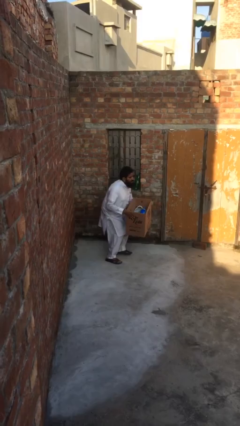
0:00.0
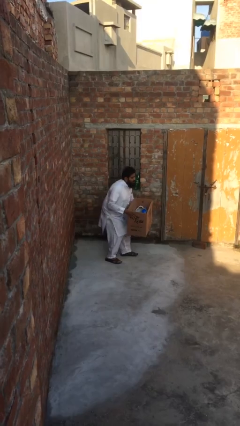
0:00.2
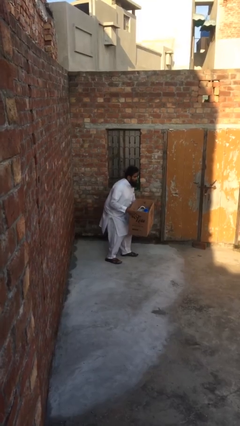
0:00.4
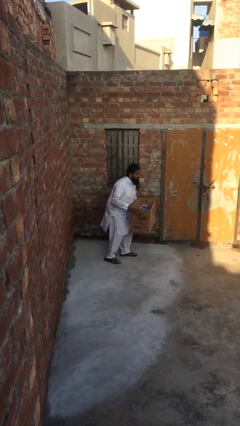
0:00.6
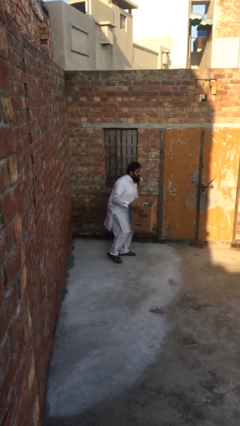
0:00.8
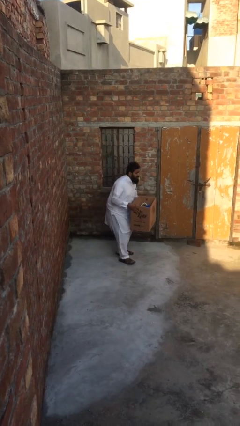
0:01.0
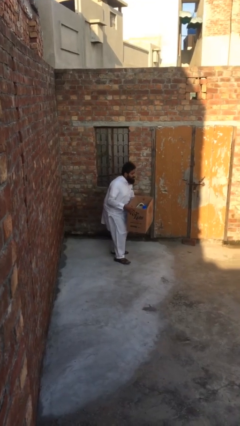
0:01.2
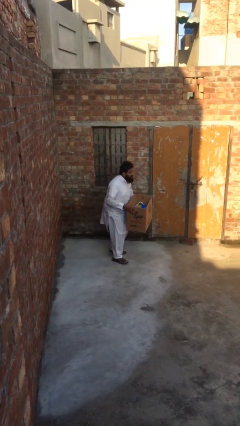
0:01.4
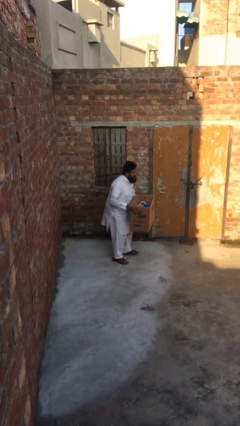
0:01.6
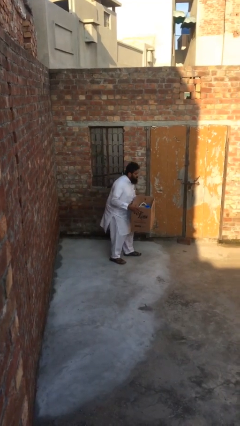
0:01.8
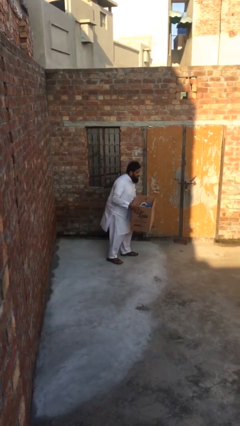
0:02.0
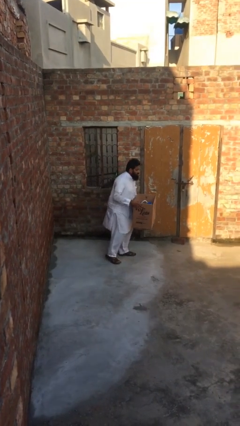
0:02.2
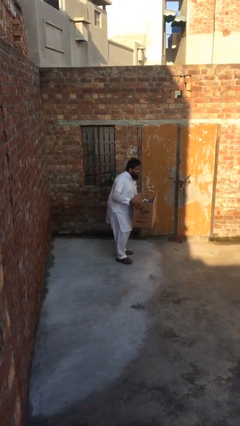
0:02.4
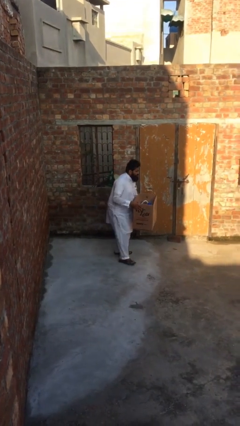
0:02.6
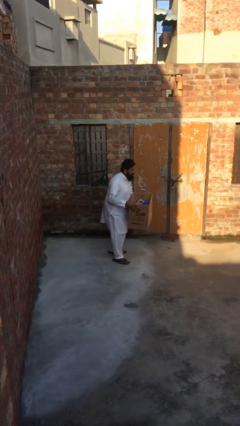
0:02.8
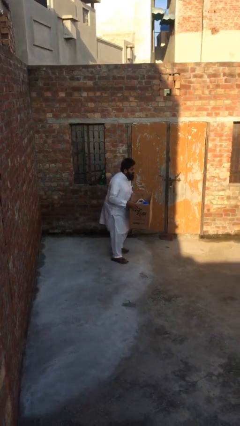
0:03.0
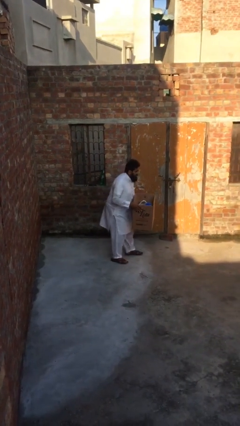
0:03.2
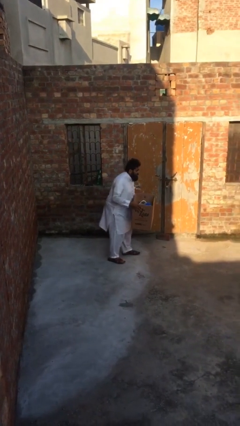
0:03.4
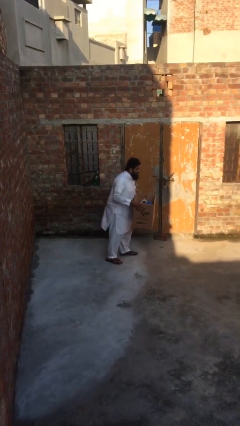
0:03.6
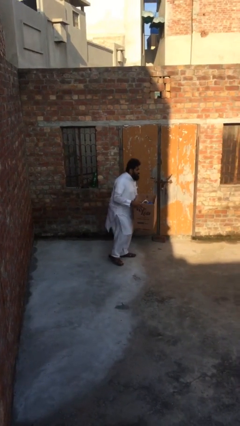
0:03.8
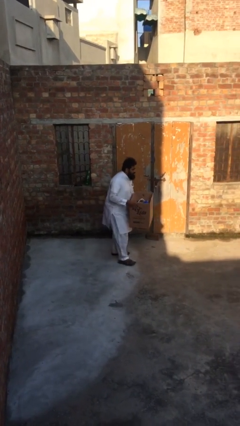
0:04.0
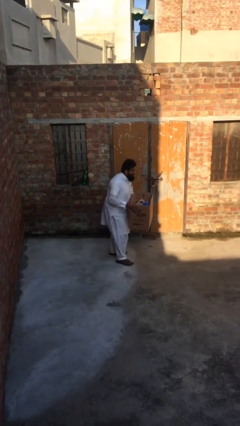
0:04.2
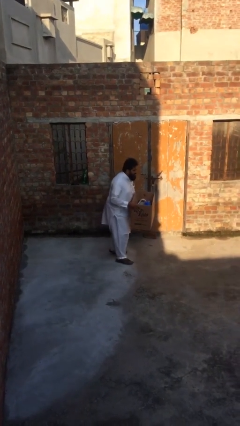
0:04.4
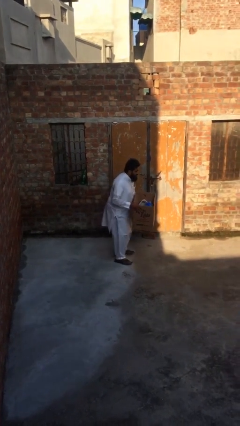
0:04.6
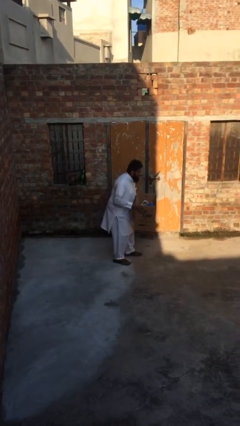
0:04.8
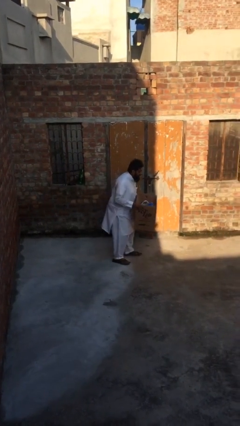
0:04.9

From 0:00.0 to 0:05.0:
person carries heavy object

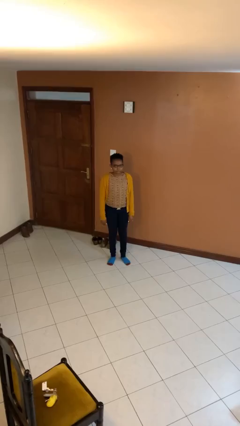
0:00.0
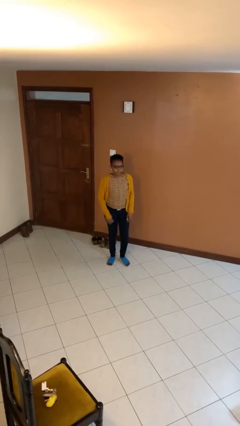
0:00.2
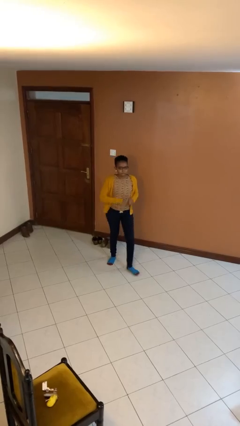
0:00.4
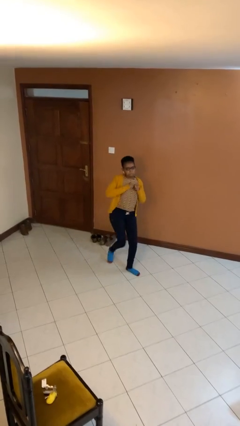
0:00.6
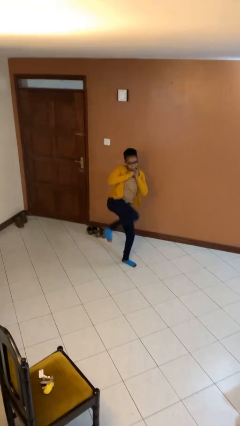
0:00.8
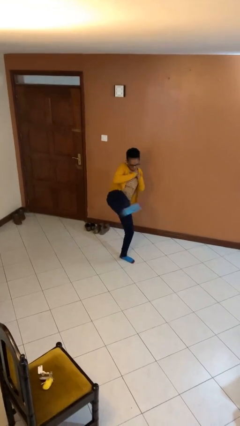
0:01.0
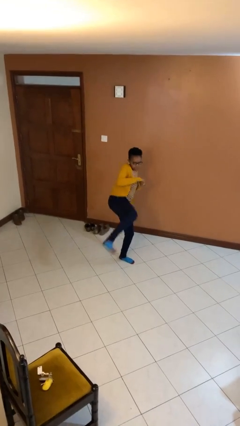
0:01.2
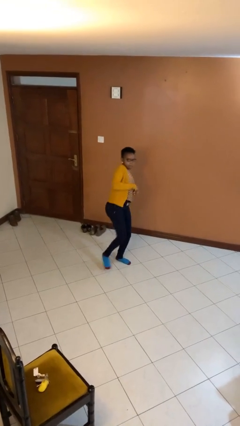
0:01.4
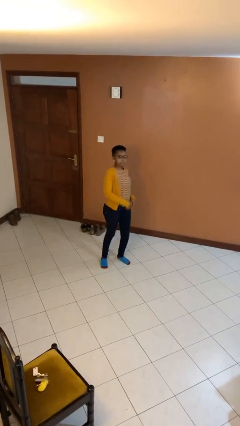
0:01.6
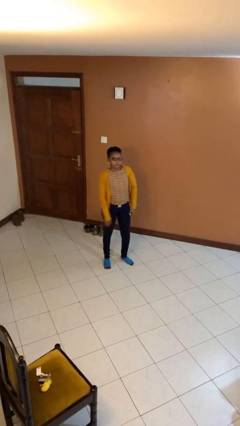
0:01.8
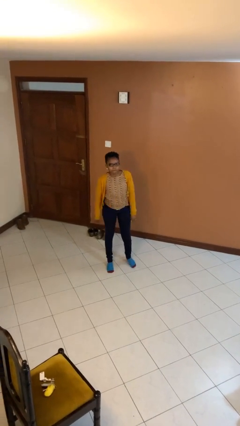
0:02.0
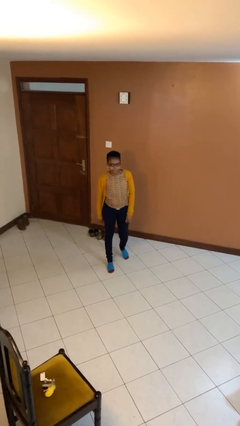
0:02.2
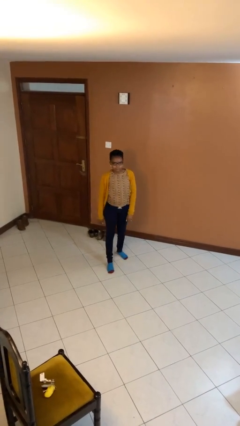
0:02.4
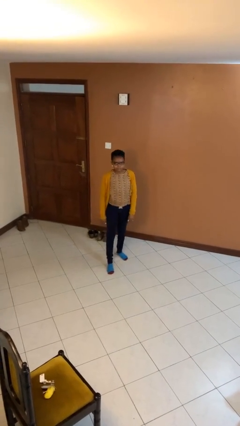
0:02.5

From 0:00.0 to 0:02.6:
person karate kicks

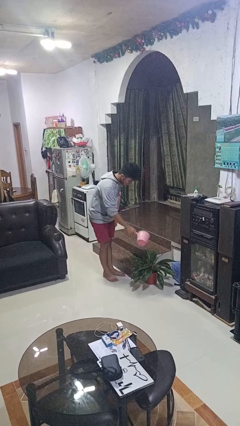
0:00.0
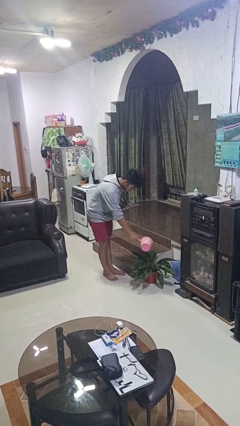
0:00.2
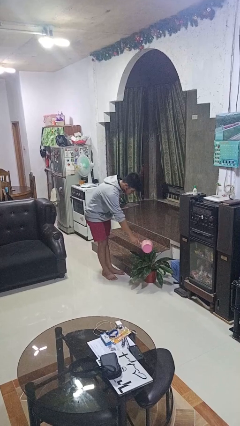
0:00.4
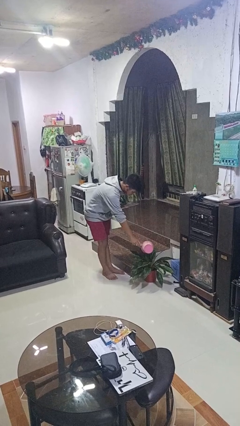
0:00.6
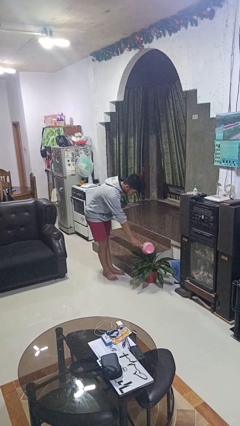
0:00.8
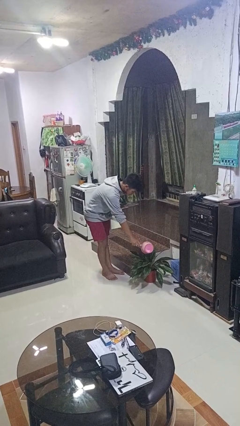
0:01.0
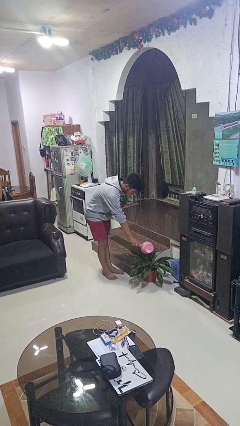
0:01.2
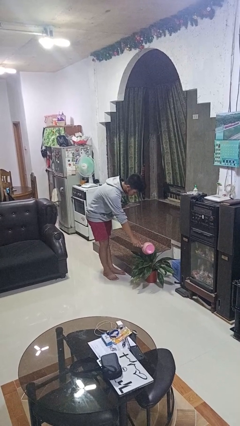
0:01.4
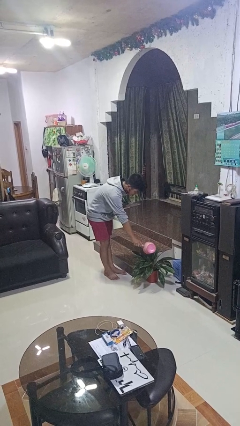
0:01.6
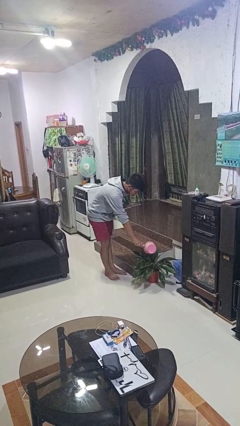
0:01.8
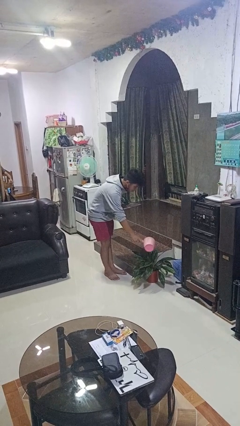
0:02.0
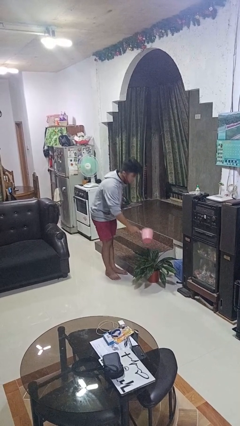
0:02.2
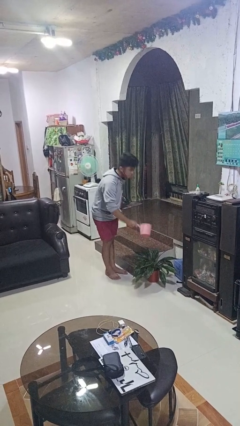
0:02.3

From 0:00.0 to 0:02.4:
person waters houseplant

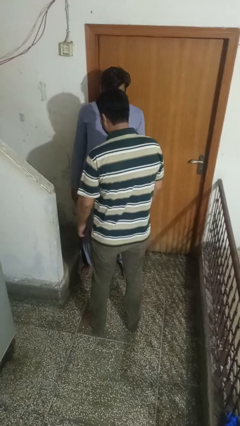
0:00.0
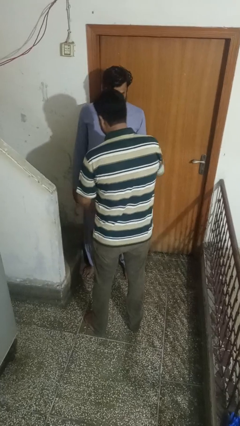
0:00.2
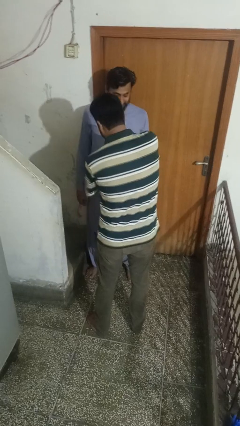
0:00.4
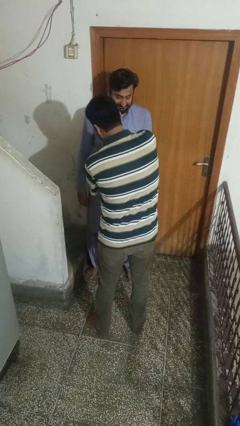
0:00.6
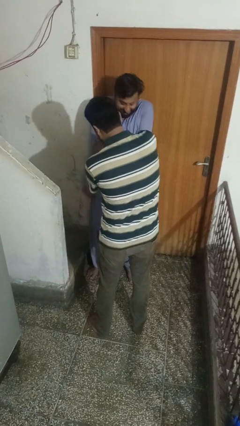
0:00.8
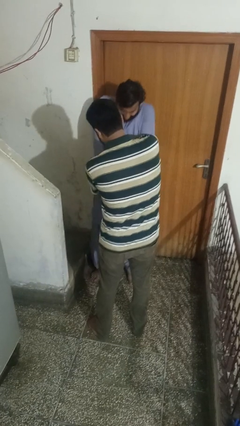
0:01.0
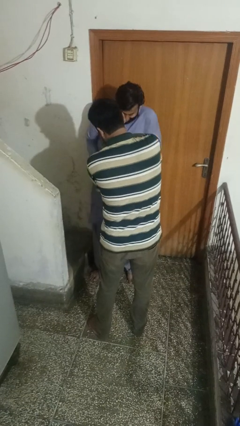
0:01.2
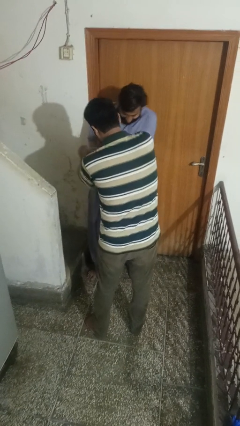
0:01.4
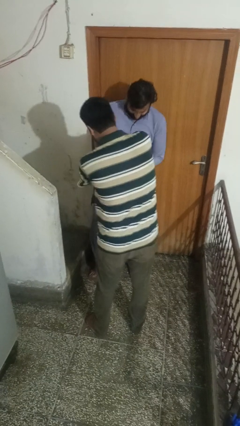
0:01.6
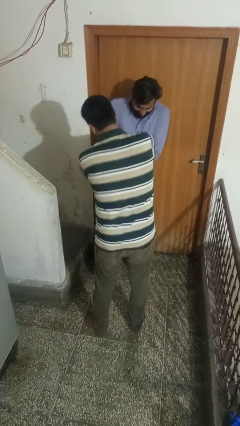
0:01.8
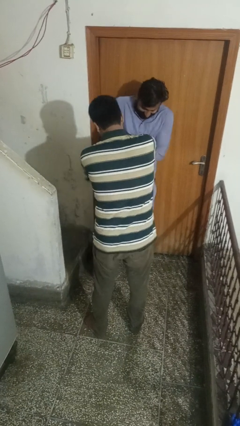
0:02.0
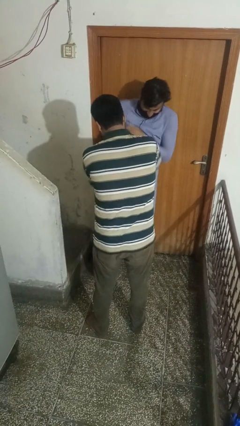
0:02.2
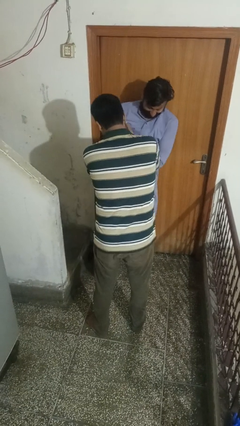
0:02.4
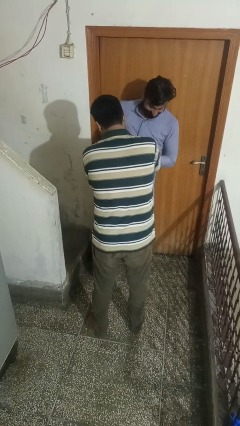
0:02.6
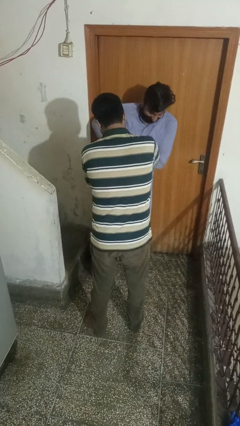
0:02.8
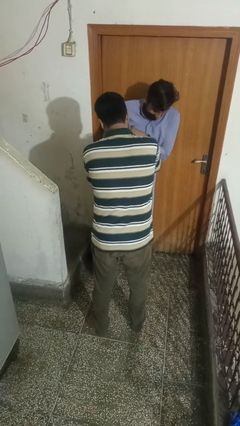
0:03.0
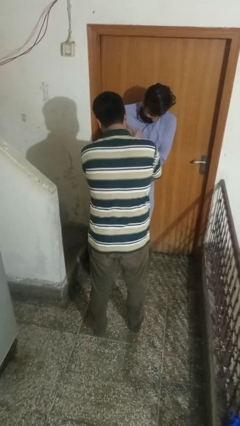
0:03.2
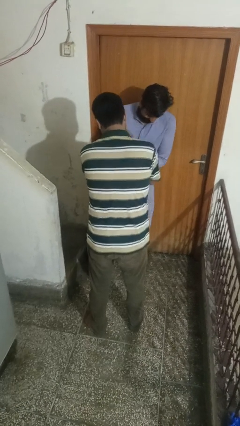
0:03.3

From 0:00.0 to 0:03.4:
person tickles person

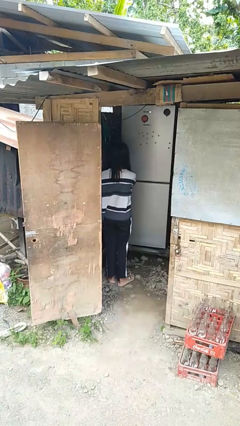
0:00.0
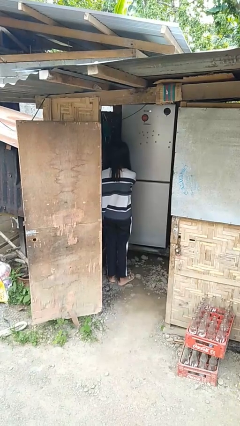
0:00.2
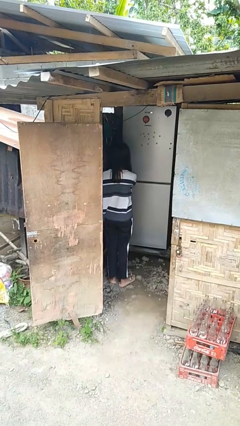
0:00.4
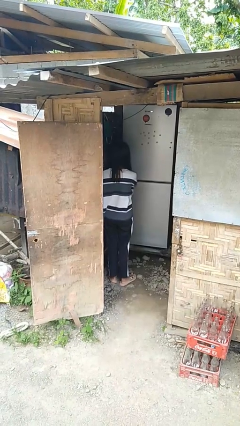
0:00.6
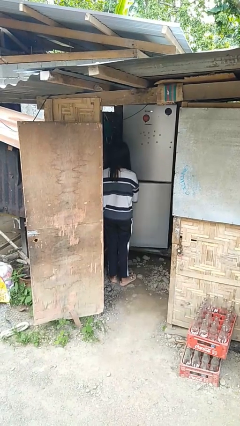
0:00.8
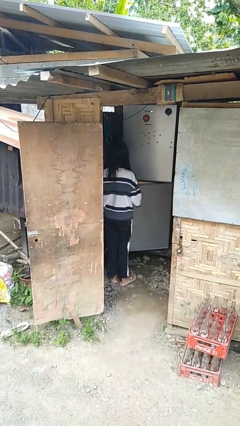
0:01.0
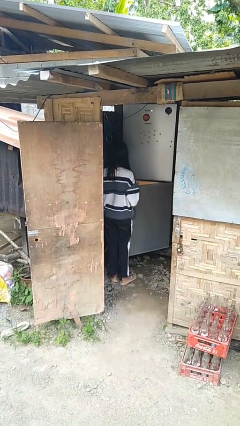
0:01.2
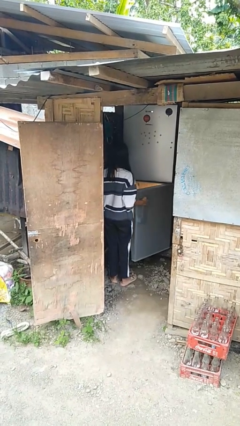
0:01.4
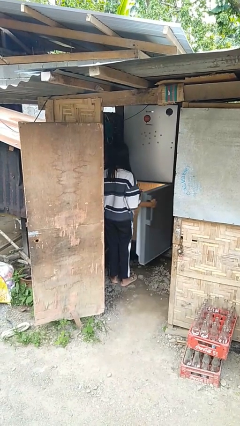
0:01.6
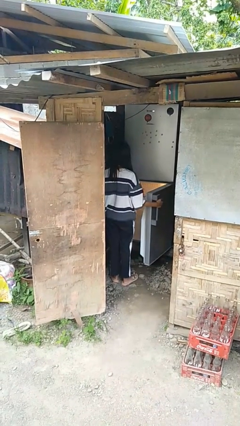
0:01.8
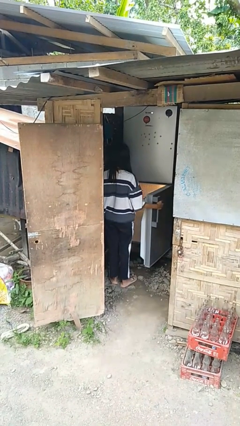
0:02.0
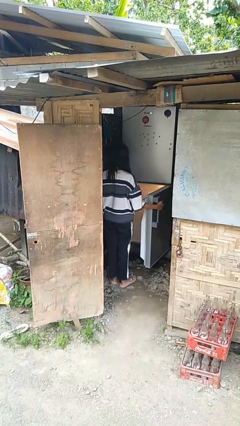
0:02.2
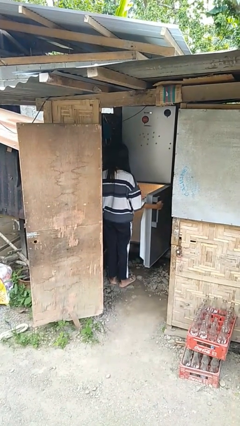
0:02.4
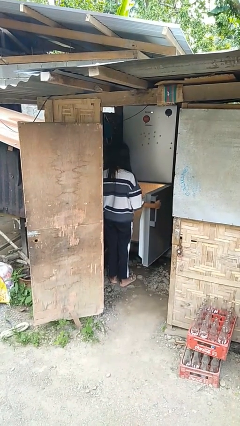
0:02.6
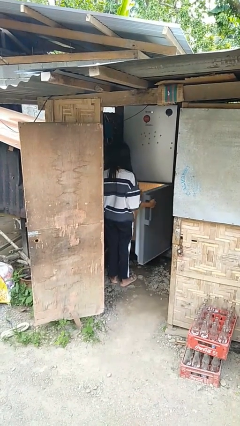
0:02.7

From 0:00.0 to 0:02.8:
person opens refrigerator

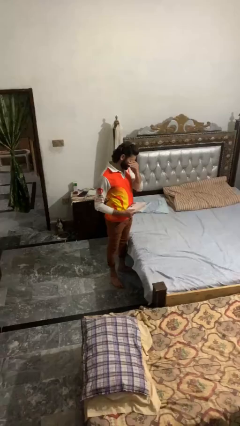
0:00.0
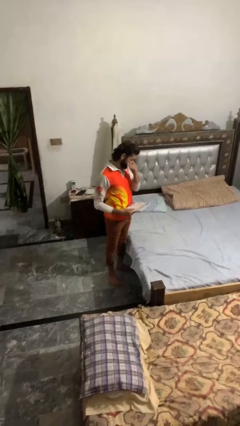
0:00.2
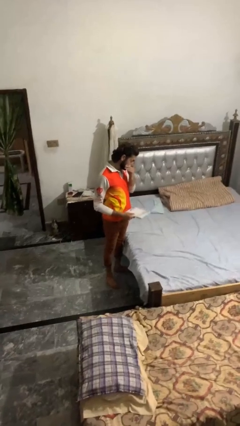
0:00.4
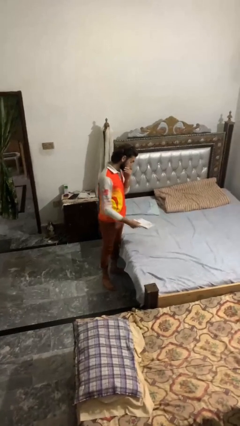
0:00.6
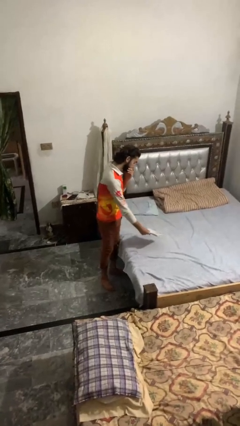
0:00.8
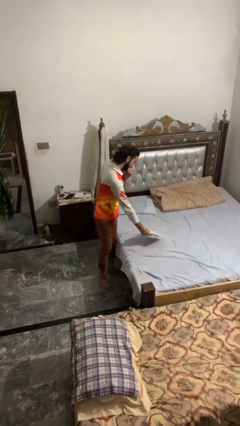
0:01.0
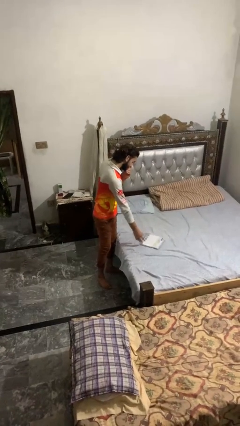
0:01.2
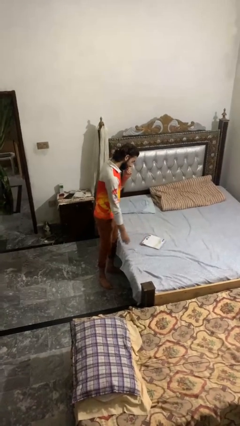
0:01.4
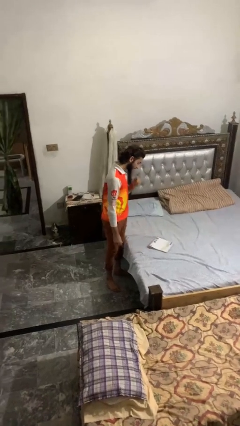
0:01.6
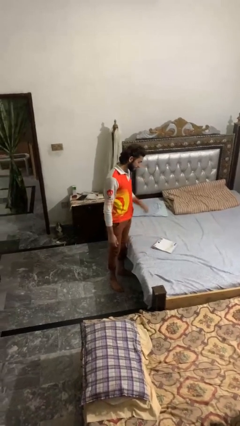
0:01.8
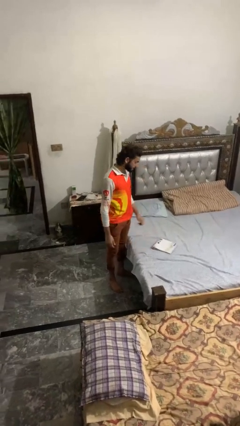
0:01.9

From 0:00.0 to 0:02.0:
person puts down object on bed
